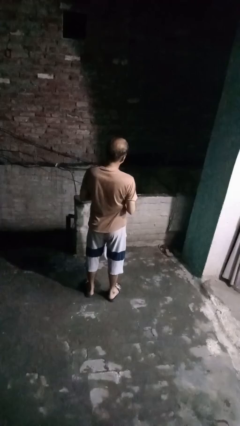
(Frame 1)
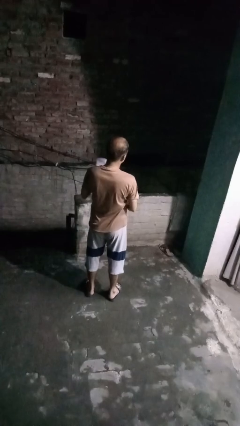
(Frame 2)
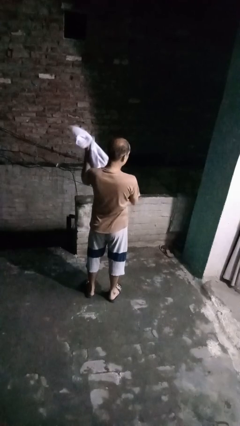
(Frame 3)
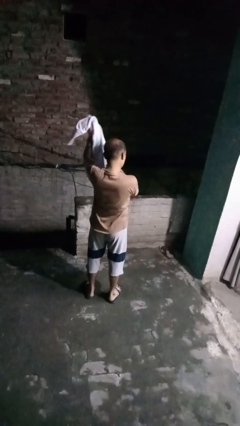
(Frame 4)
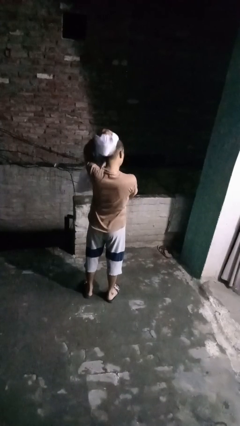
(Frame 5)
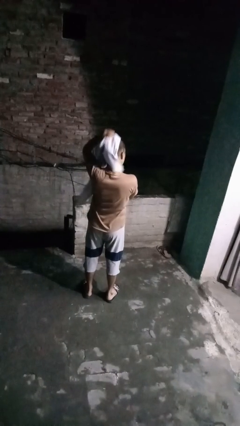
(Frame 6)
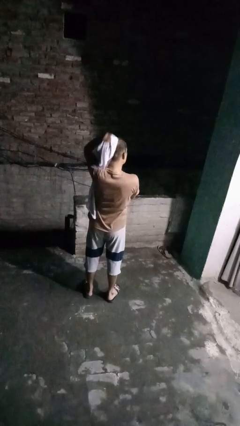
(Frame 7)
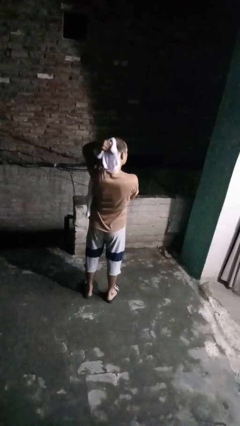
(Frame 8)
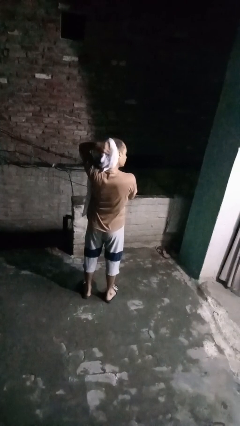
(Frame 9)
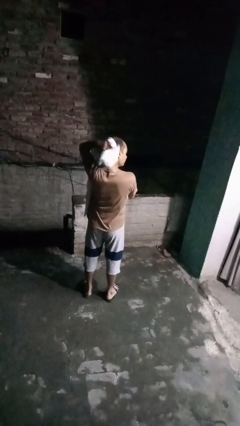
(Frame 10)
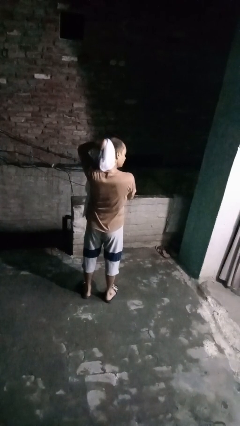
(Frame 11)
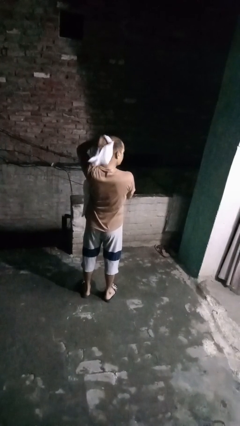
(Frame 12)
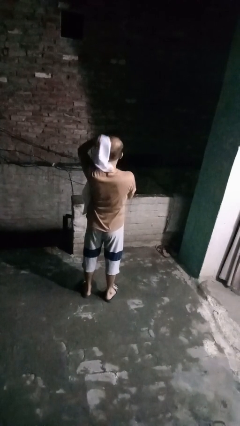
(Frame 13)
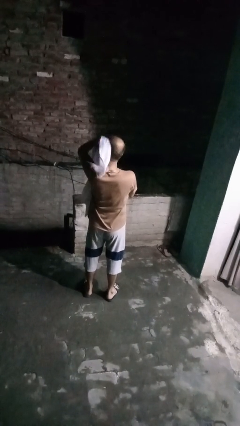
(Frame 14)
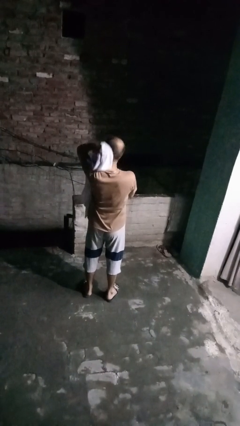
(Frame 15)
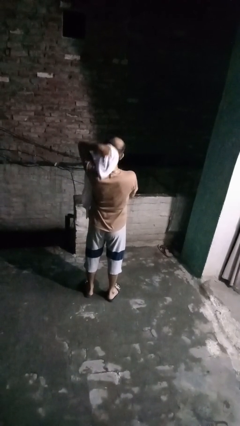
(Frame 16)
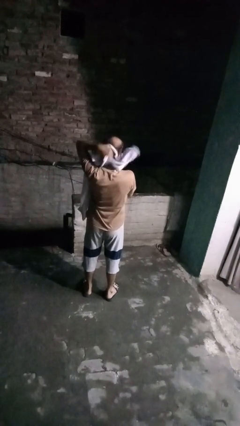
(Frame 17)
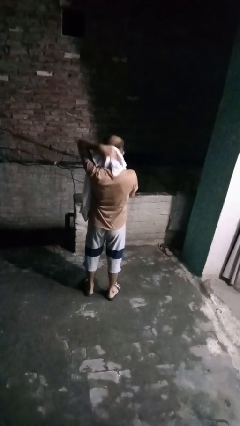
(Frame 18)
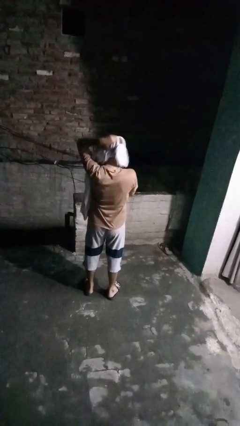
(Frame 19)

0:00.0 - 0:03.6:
person dries hair with towel

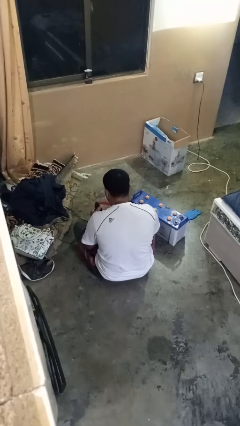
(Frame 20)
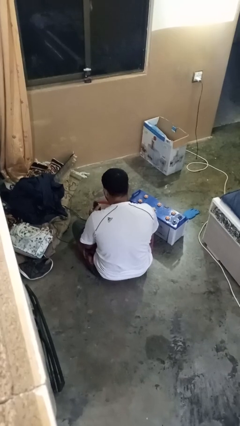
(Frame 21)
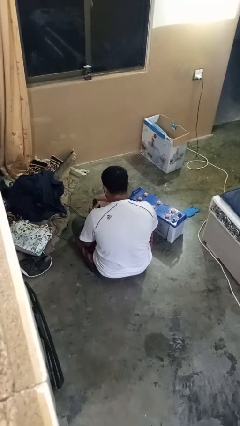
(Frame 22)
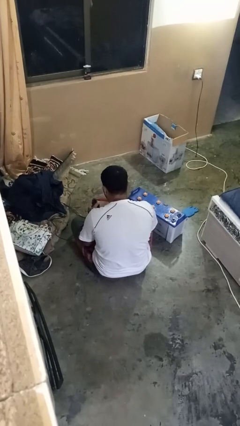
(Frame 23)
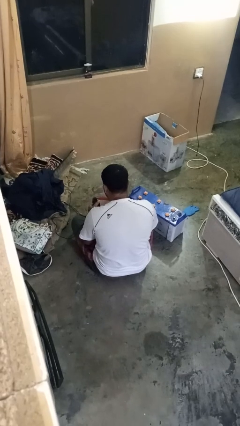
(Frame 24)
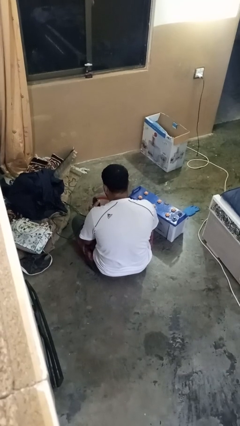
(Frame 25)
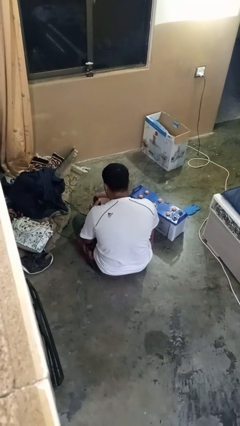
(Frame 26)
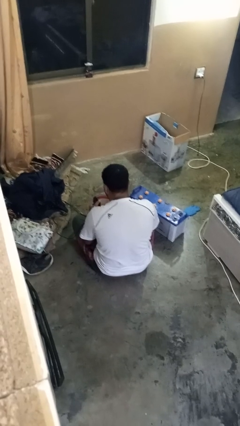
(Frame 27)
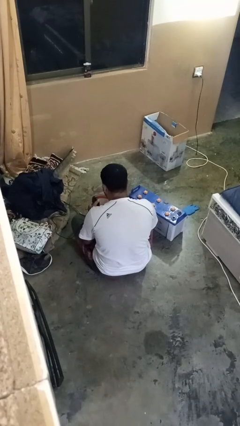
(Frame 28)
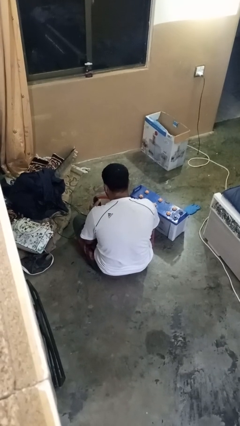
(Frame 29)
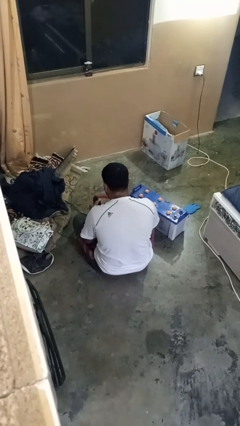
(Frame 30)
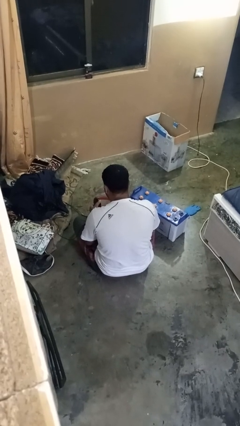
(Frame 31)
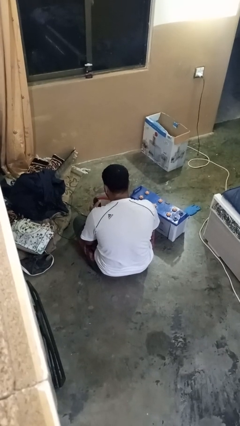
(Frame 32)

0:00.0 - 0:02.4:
person puts on headphones

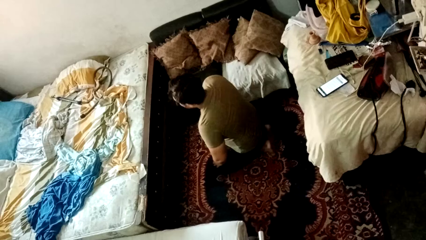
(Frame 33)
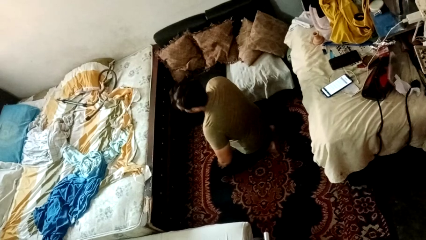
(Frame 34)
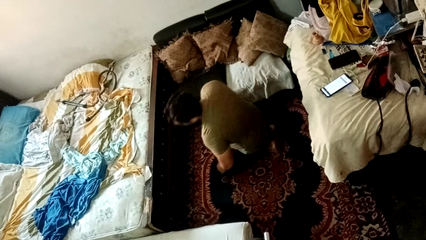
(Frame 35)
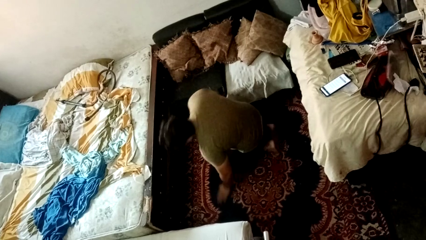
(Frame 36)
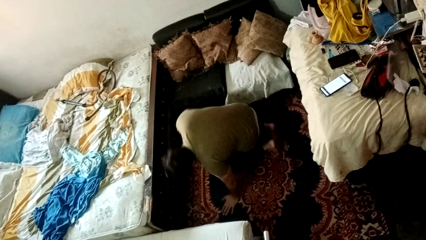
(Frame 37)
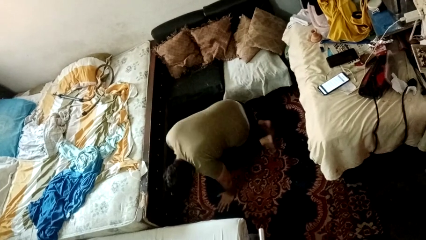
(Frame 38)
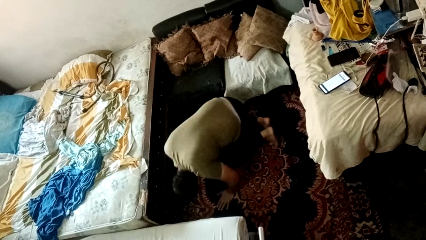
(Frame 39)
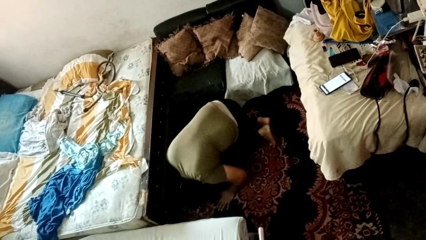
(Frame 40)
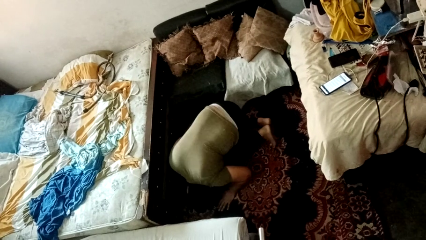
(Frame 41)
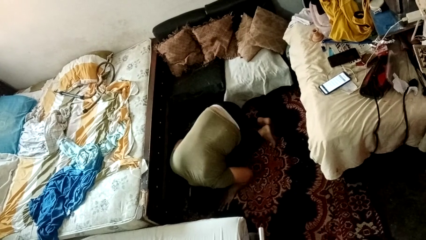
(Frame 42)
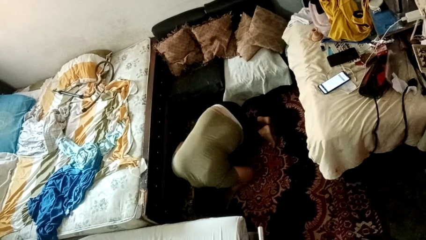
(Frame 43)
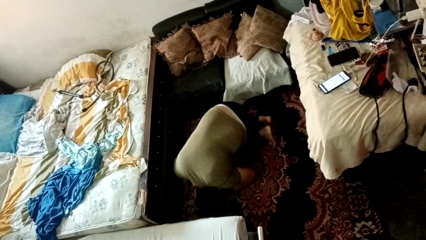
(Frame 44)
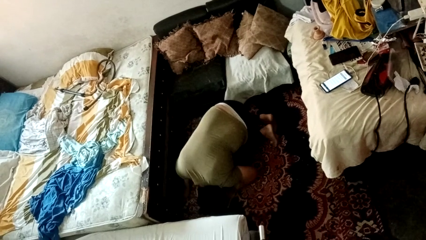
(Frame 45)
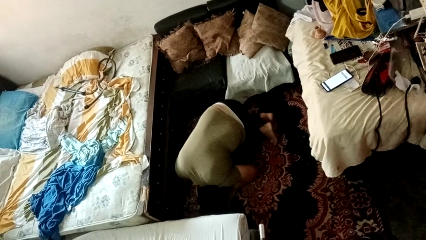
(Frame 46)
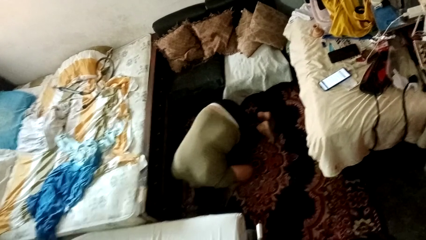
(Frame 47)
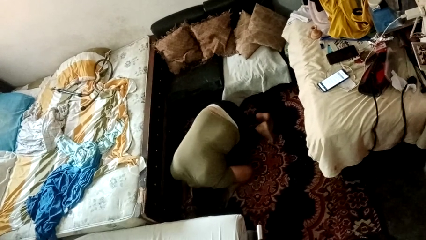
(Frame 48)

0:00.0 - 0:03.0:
person searches under bed

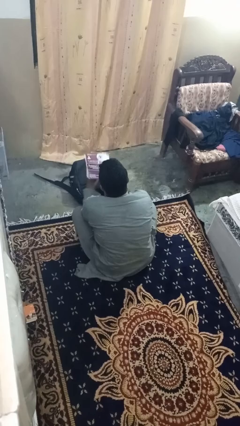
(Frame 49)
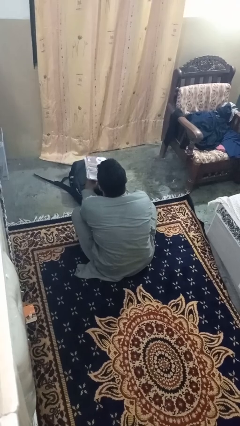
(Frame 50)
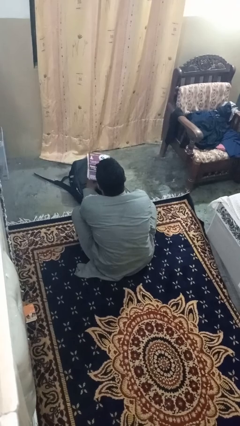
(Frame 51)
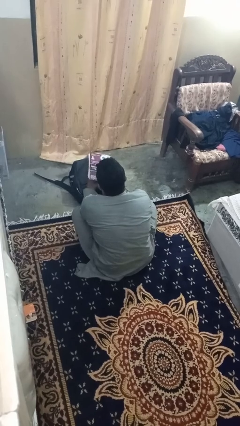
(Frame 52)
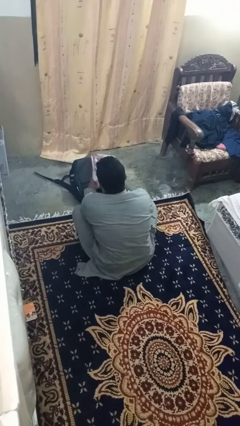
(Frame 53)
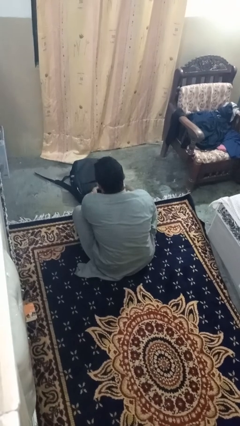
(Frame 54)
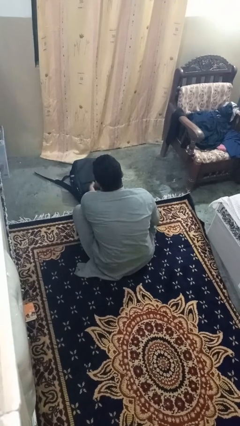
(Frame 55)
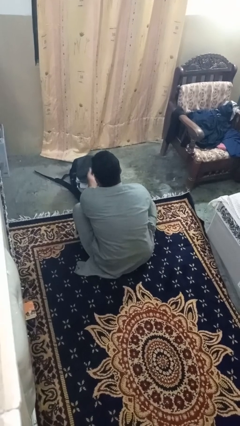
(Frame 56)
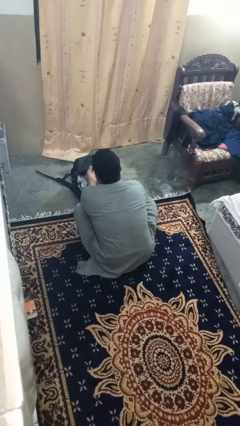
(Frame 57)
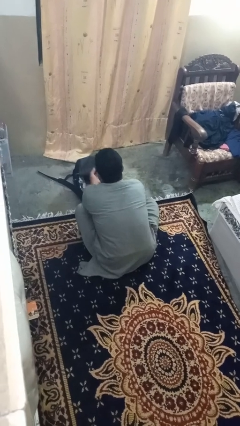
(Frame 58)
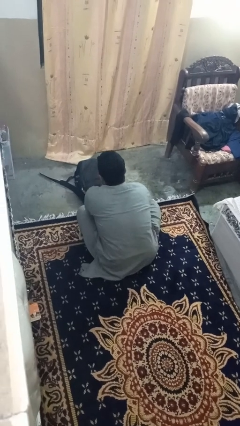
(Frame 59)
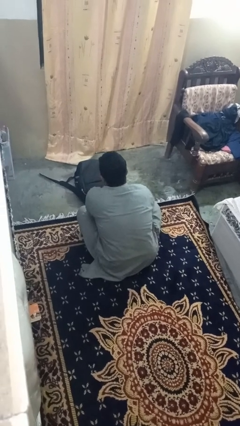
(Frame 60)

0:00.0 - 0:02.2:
person puts object into bag

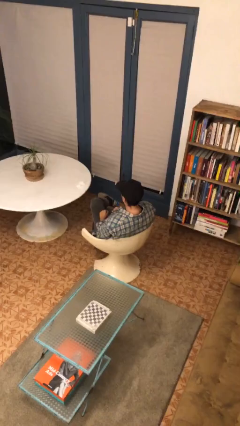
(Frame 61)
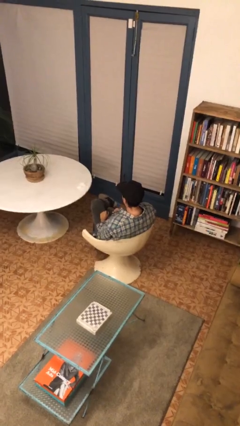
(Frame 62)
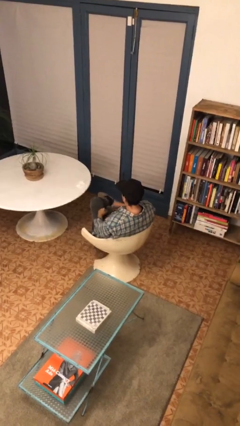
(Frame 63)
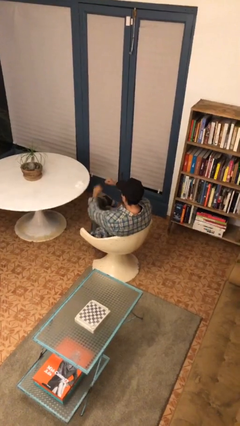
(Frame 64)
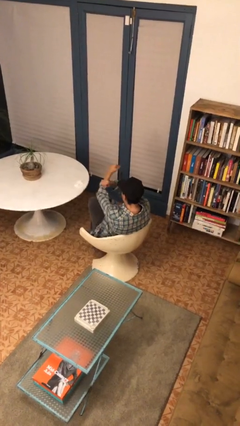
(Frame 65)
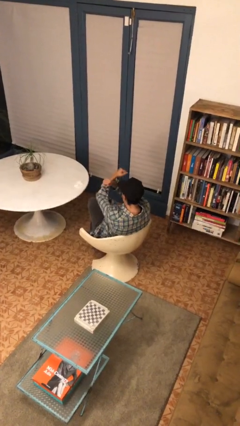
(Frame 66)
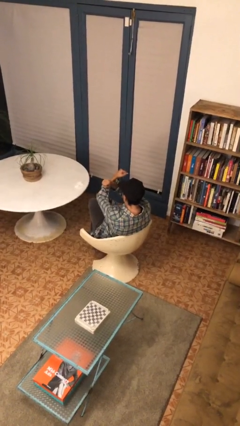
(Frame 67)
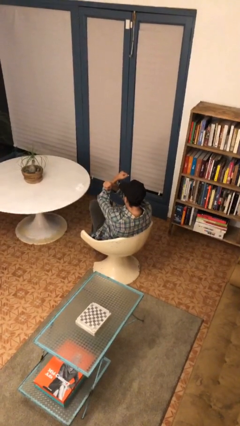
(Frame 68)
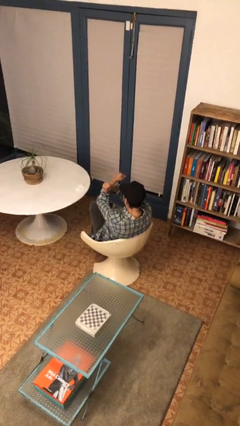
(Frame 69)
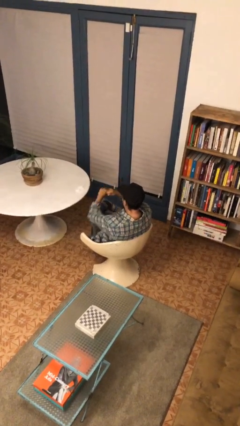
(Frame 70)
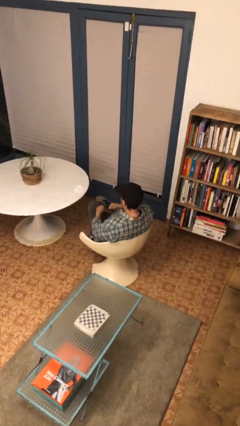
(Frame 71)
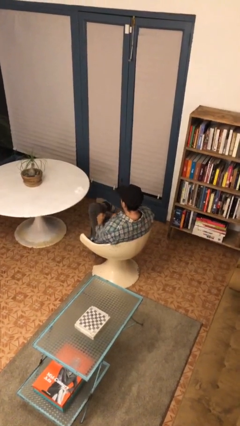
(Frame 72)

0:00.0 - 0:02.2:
person gestures arms x

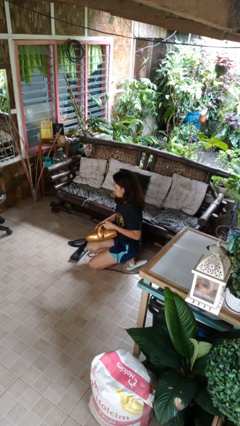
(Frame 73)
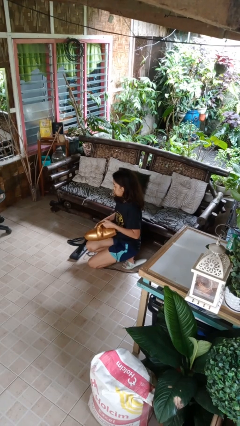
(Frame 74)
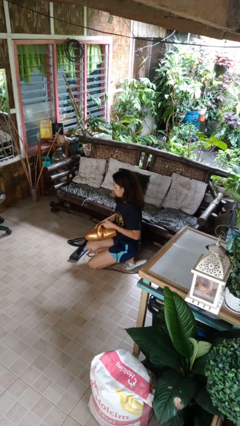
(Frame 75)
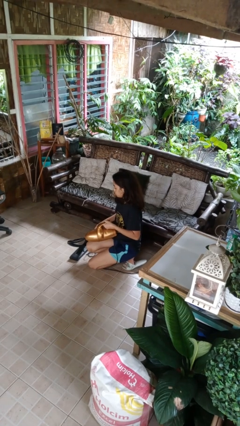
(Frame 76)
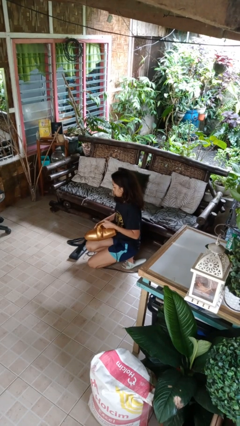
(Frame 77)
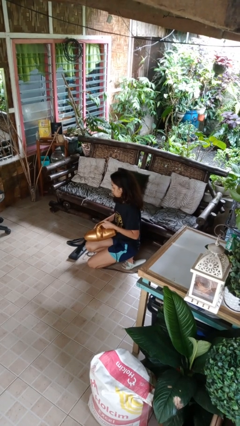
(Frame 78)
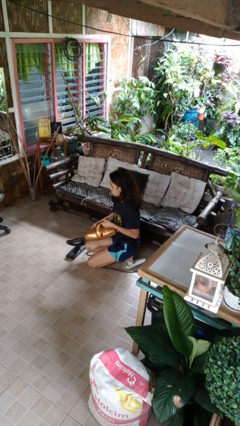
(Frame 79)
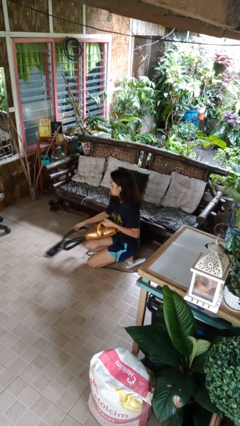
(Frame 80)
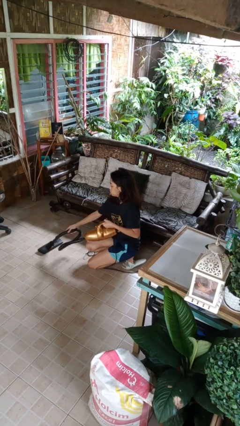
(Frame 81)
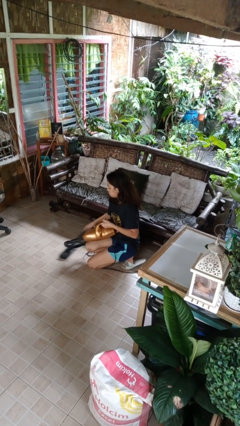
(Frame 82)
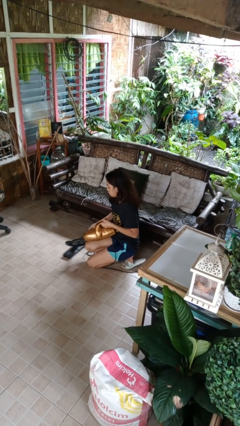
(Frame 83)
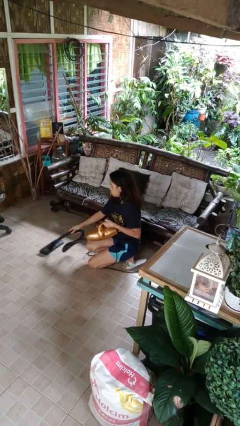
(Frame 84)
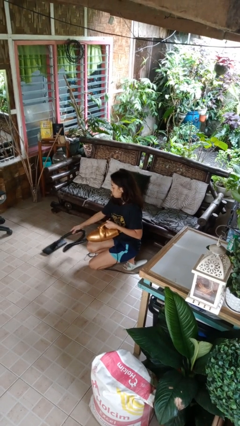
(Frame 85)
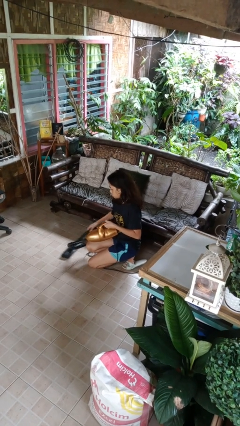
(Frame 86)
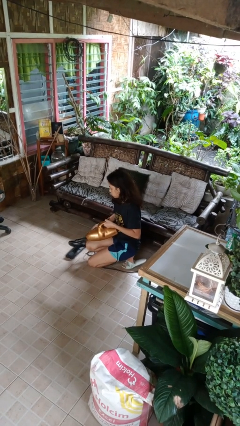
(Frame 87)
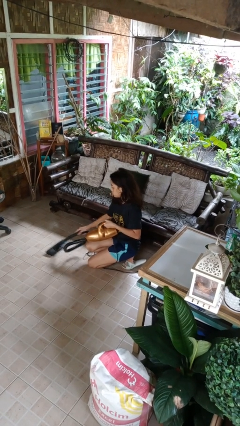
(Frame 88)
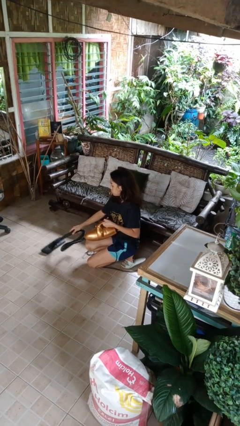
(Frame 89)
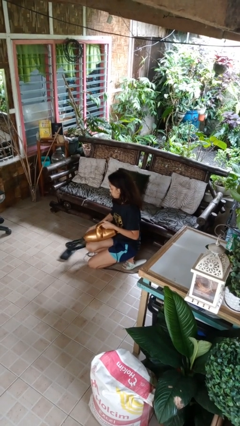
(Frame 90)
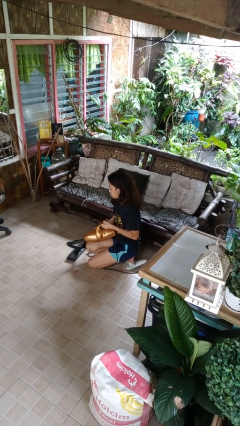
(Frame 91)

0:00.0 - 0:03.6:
person vacuums carpet
